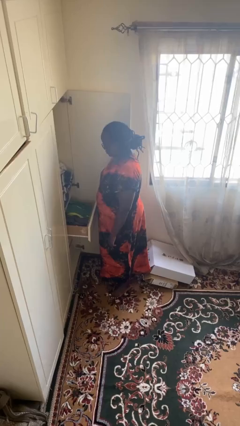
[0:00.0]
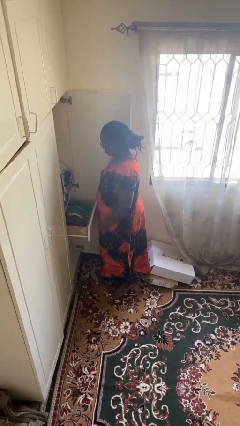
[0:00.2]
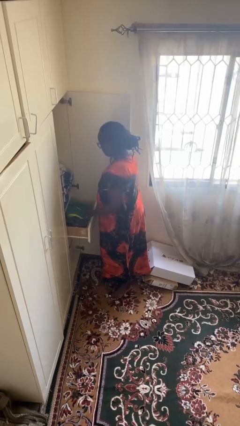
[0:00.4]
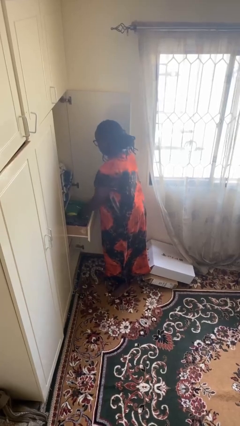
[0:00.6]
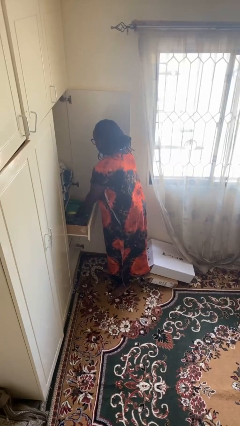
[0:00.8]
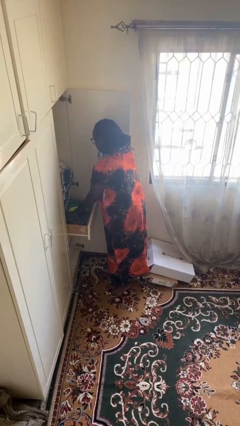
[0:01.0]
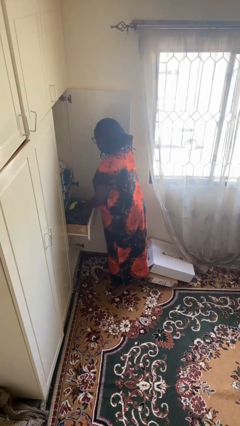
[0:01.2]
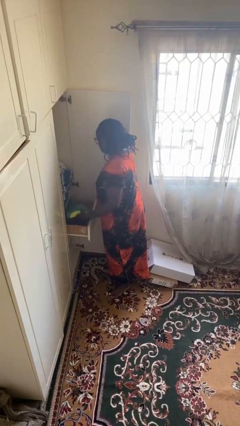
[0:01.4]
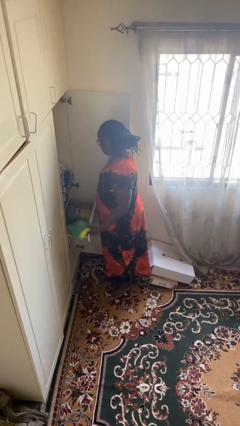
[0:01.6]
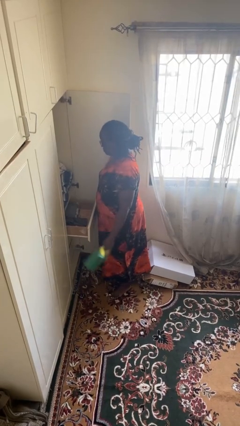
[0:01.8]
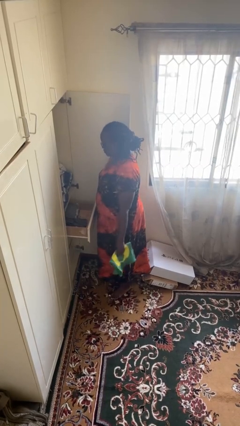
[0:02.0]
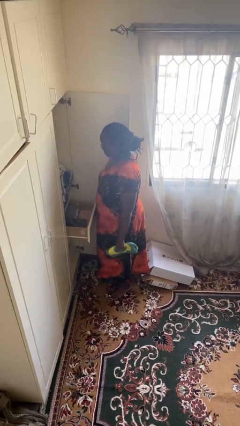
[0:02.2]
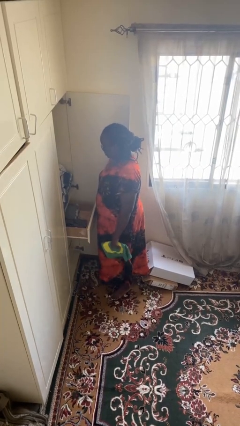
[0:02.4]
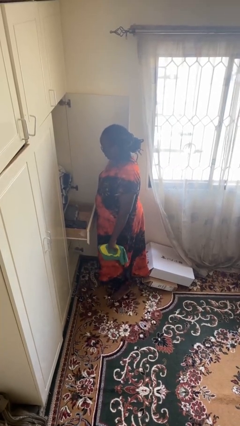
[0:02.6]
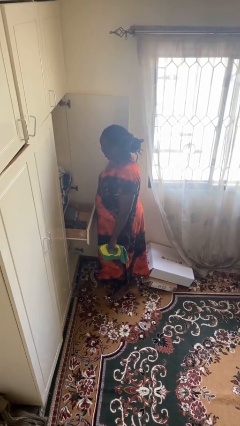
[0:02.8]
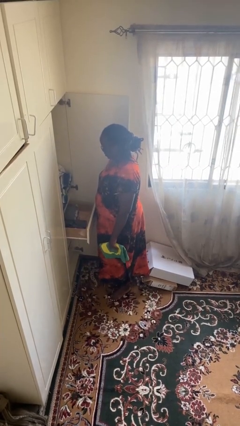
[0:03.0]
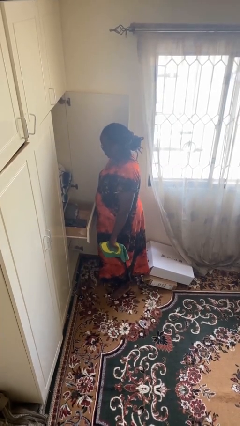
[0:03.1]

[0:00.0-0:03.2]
person takes clothes from dresser

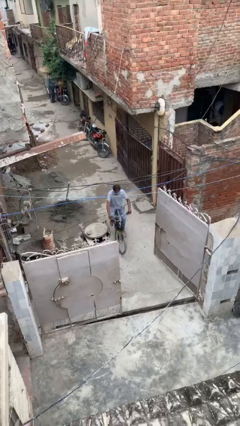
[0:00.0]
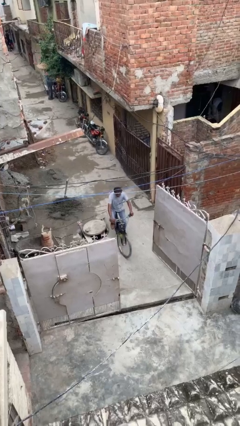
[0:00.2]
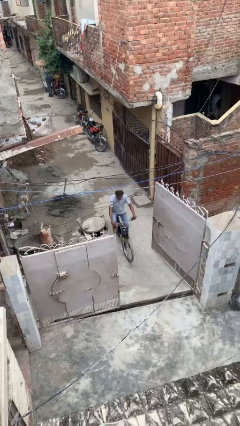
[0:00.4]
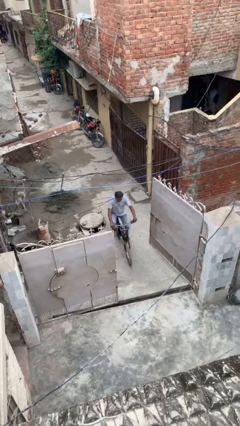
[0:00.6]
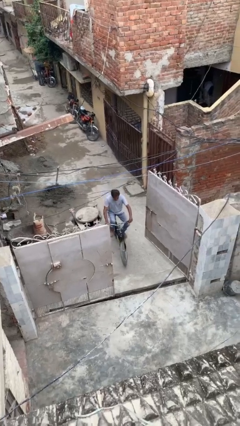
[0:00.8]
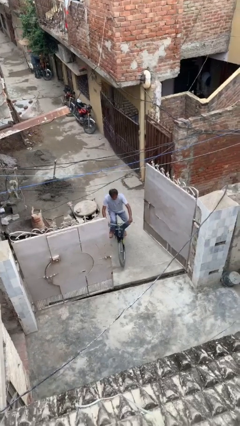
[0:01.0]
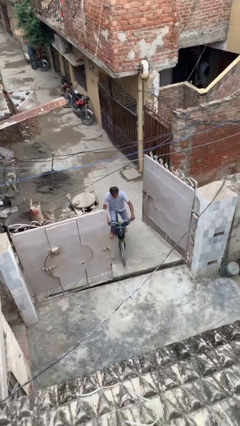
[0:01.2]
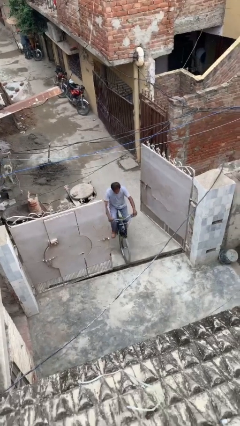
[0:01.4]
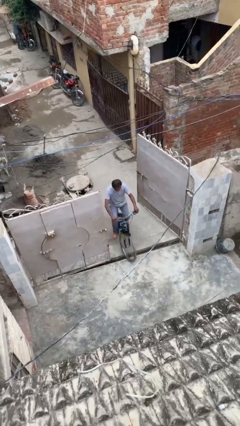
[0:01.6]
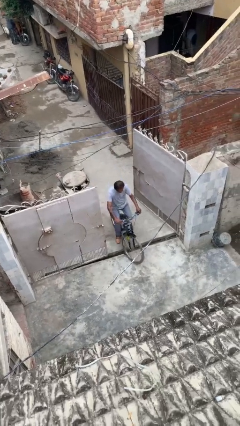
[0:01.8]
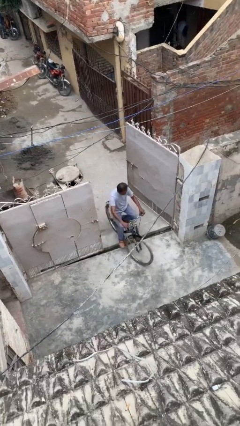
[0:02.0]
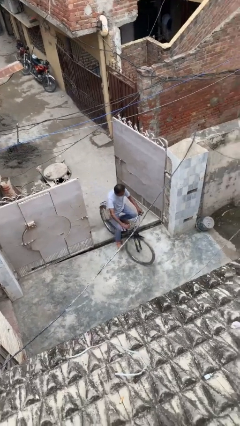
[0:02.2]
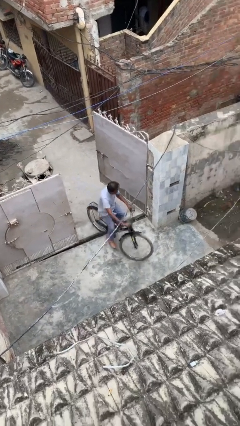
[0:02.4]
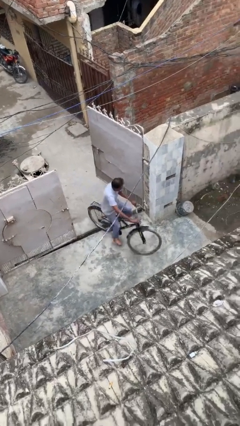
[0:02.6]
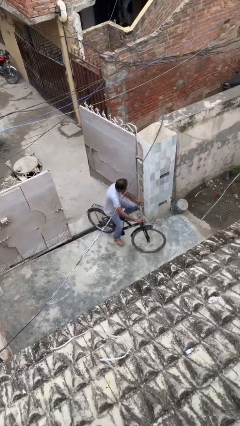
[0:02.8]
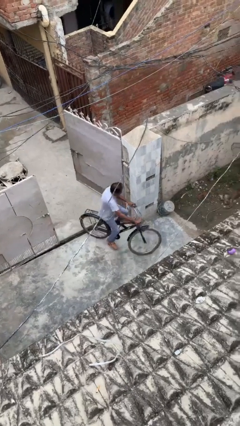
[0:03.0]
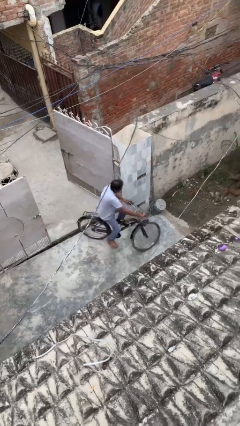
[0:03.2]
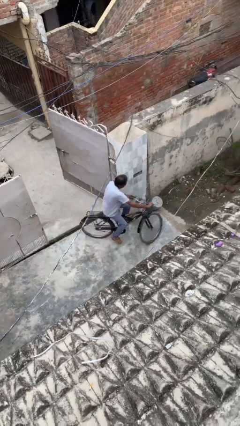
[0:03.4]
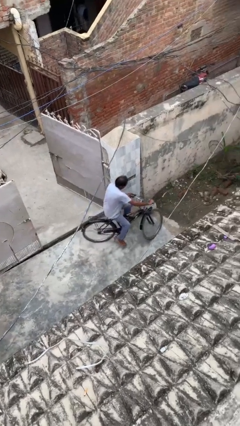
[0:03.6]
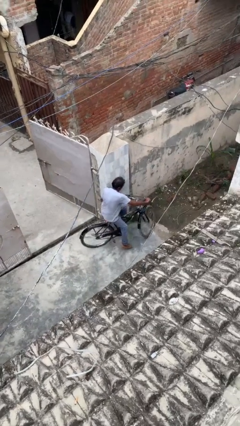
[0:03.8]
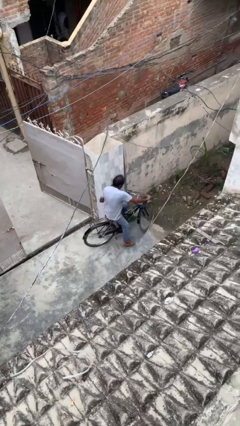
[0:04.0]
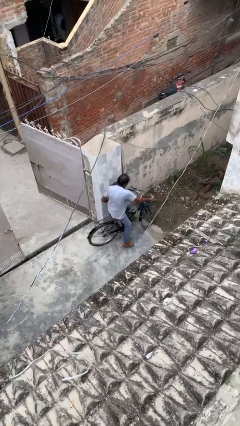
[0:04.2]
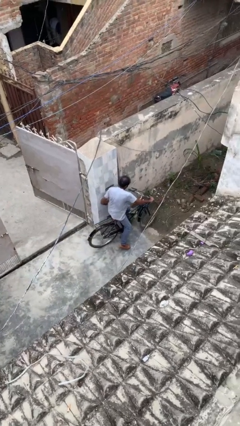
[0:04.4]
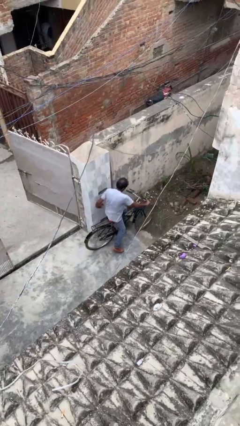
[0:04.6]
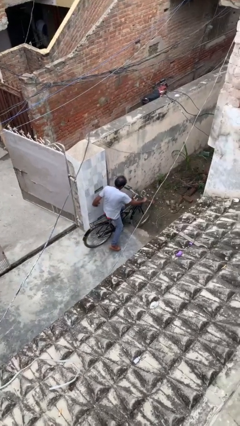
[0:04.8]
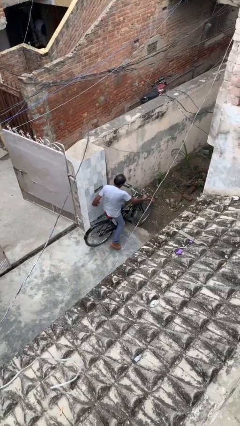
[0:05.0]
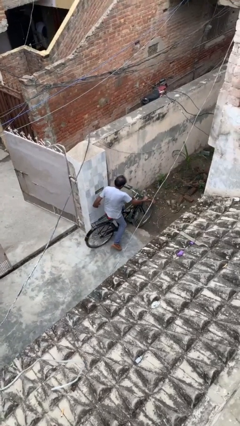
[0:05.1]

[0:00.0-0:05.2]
person rides bicycle

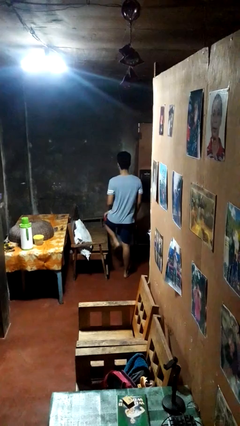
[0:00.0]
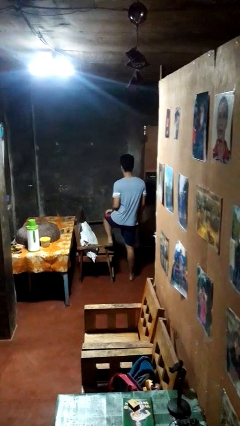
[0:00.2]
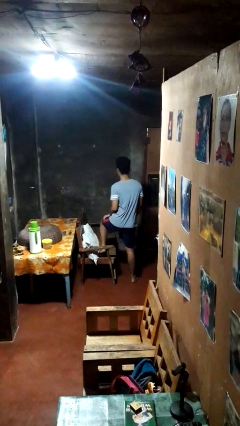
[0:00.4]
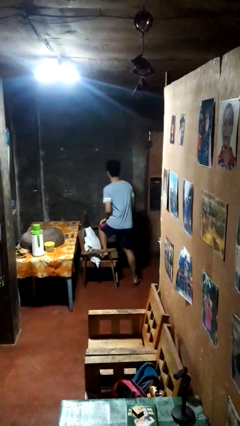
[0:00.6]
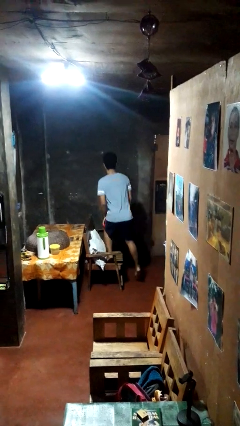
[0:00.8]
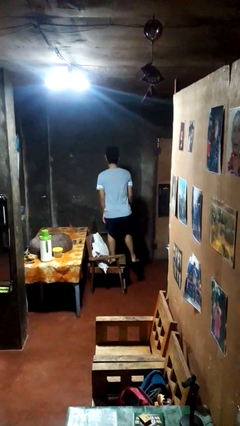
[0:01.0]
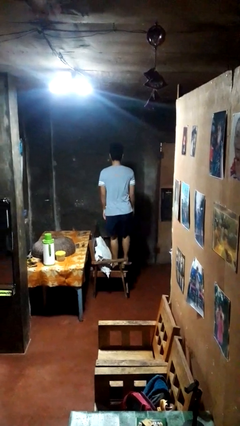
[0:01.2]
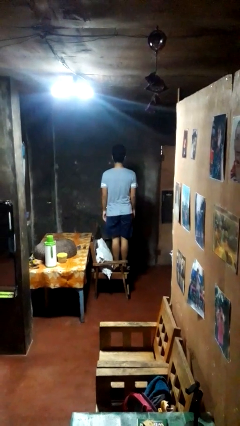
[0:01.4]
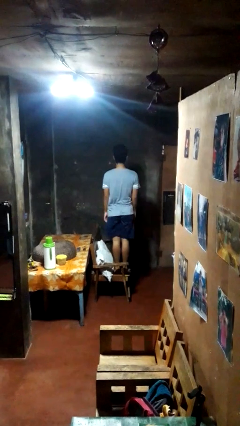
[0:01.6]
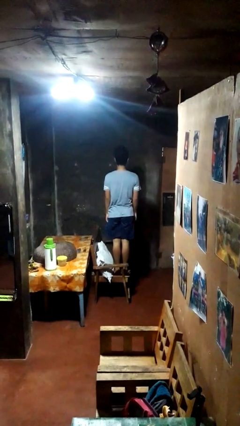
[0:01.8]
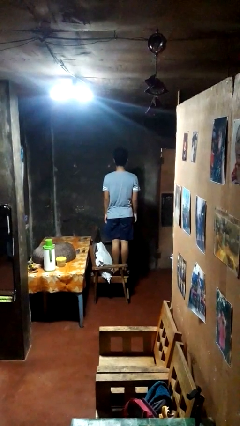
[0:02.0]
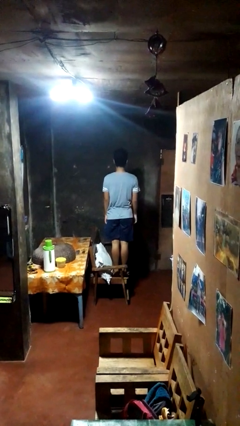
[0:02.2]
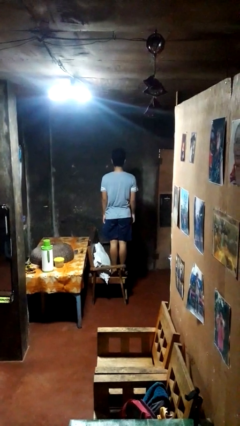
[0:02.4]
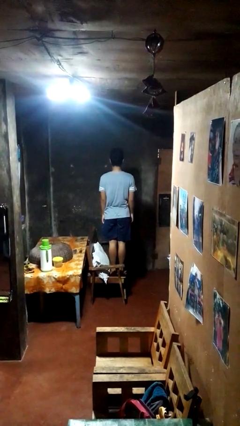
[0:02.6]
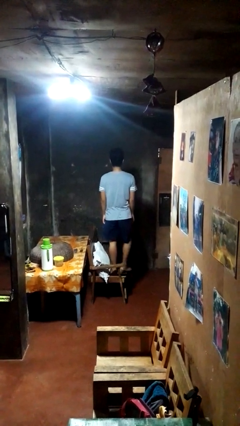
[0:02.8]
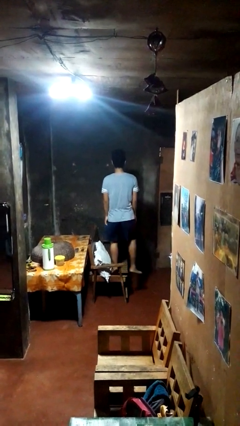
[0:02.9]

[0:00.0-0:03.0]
person climbs on couch

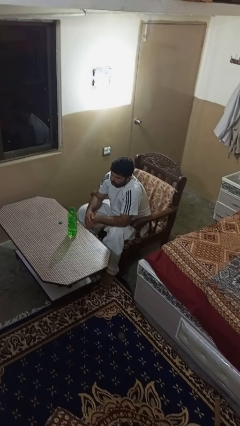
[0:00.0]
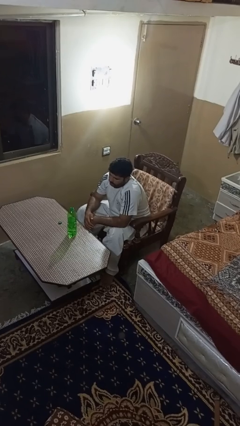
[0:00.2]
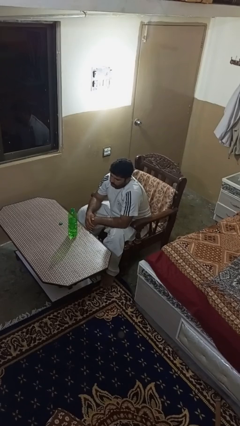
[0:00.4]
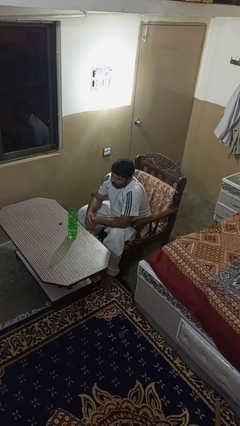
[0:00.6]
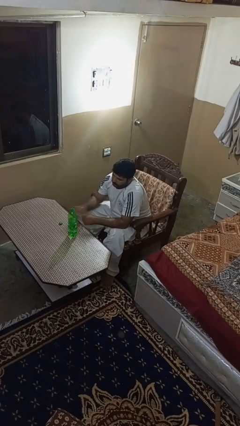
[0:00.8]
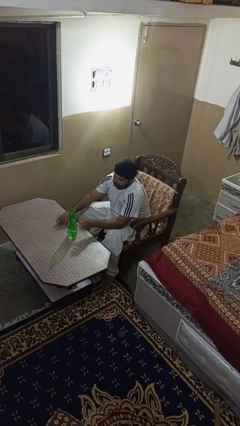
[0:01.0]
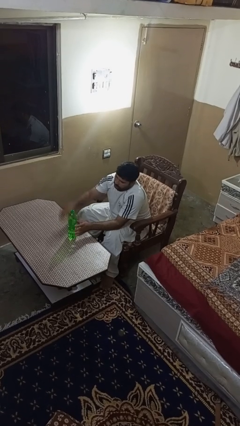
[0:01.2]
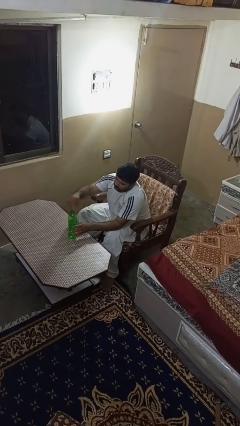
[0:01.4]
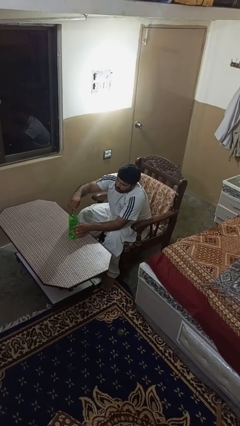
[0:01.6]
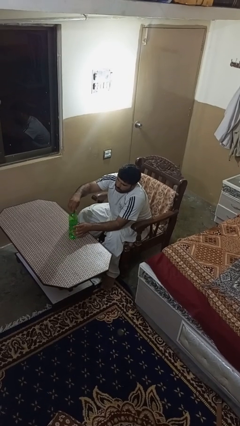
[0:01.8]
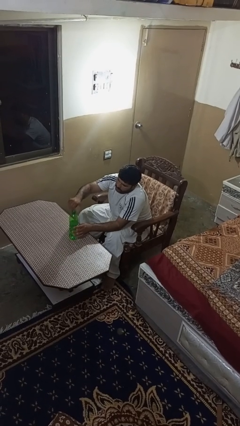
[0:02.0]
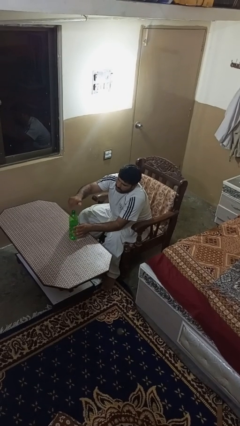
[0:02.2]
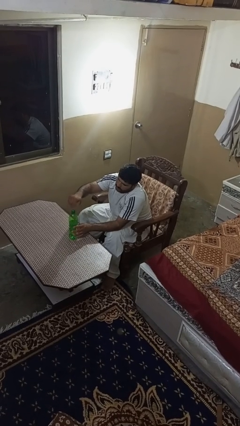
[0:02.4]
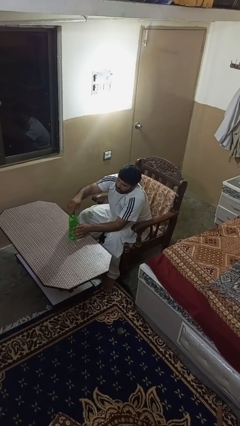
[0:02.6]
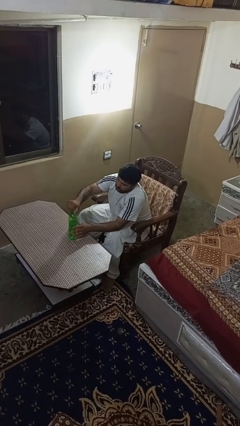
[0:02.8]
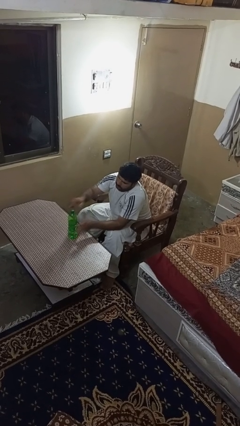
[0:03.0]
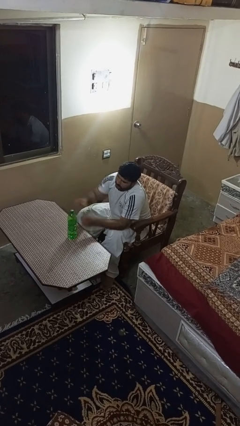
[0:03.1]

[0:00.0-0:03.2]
person screws lid to bottle

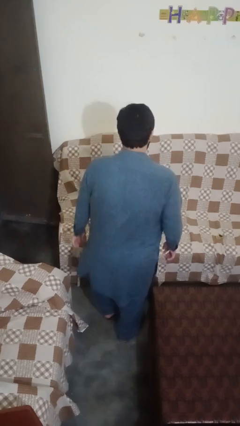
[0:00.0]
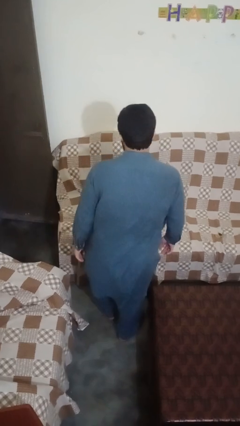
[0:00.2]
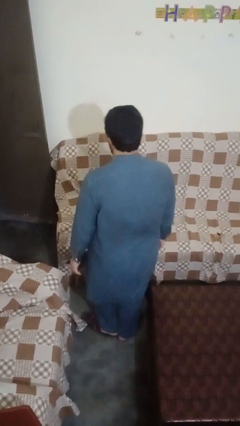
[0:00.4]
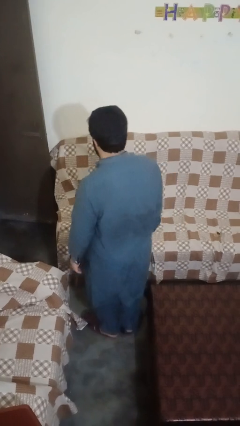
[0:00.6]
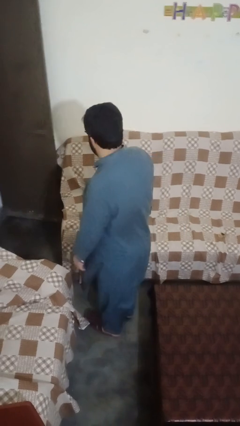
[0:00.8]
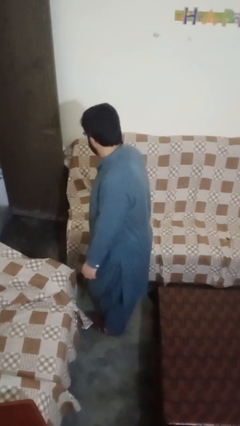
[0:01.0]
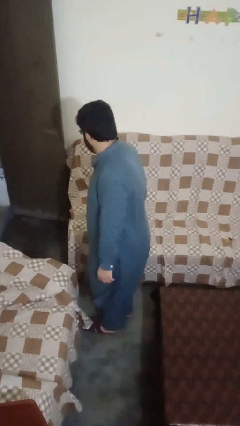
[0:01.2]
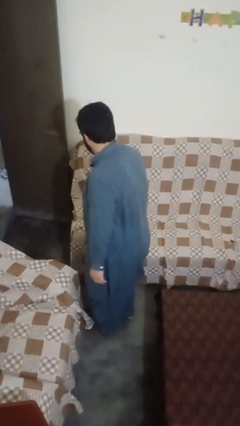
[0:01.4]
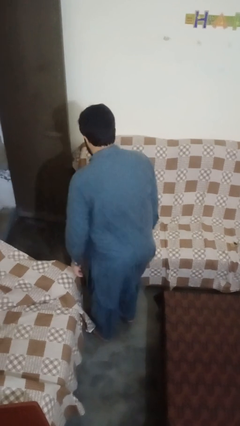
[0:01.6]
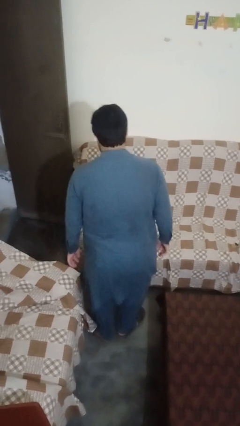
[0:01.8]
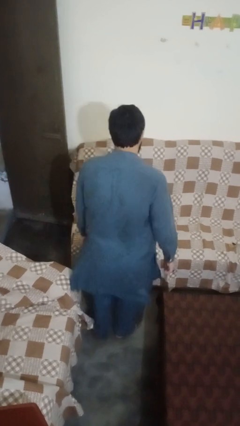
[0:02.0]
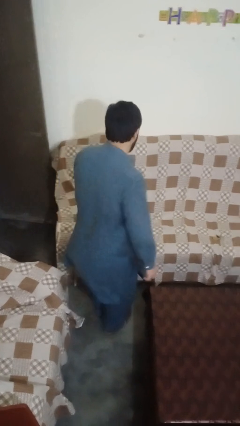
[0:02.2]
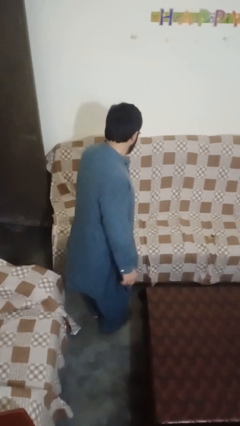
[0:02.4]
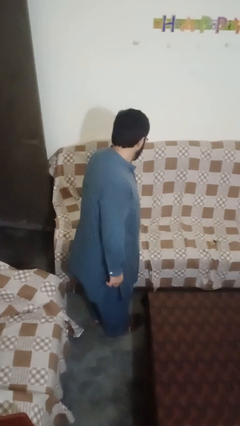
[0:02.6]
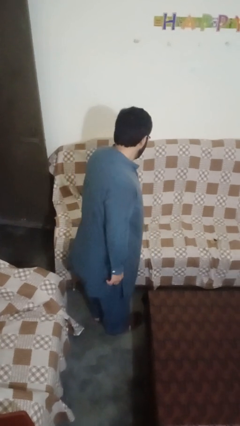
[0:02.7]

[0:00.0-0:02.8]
person twirls
